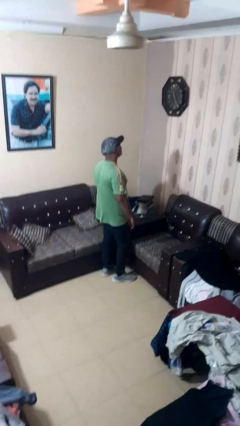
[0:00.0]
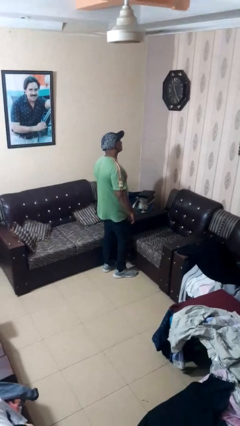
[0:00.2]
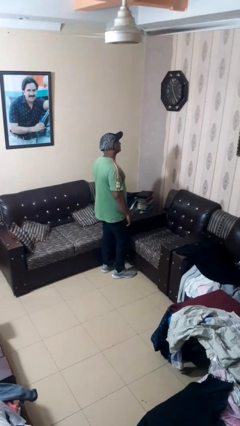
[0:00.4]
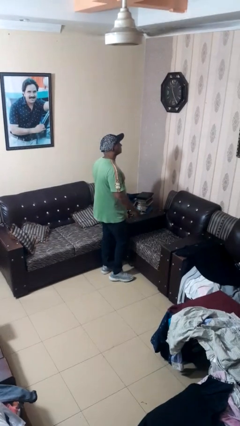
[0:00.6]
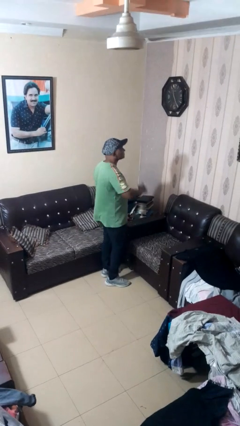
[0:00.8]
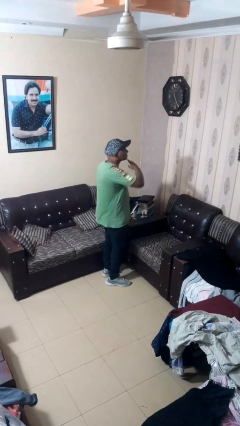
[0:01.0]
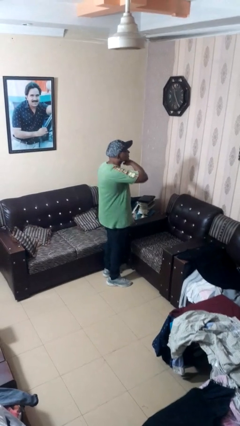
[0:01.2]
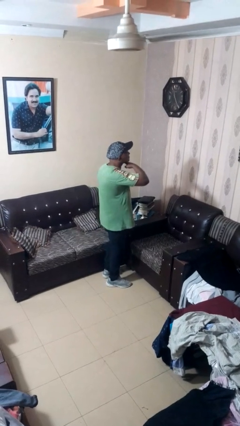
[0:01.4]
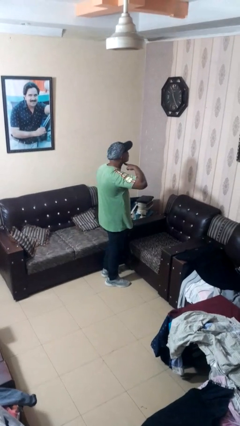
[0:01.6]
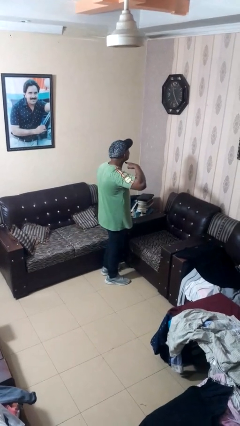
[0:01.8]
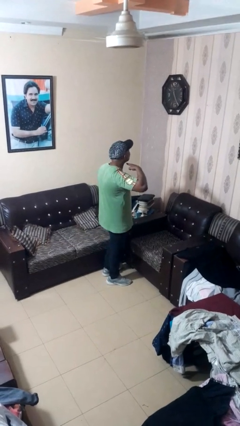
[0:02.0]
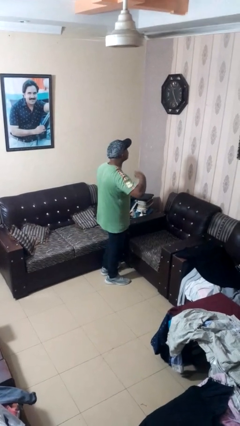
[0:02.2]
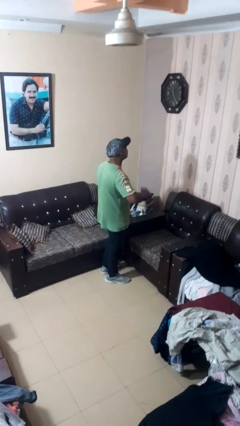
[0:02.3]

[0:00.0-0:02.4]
person gestures cut

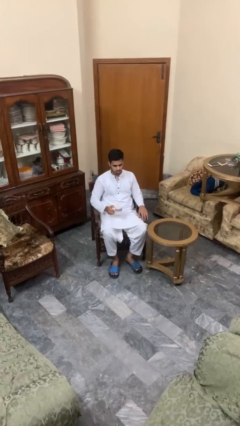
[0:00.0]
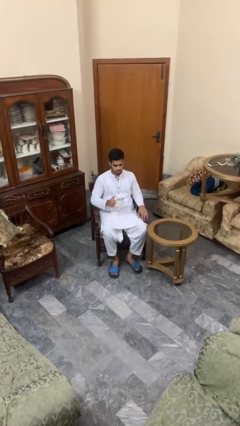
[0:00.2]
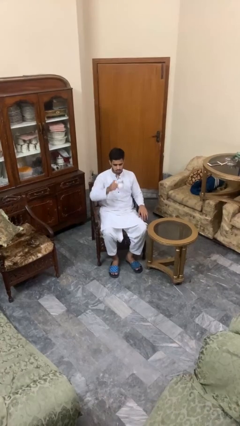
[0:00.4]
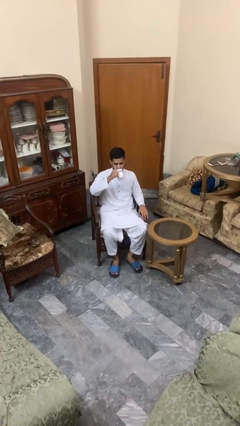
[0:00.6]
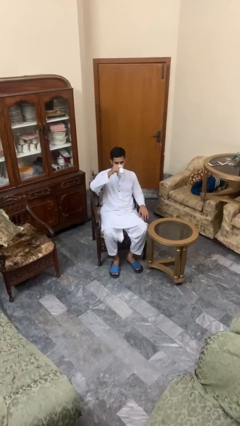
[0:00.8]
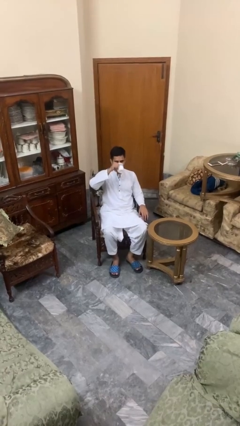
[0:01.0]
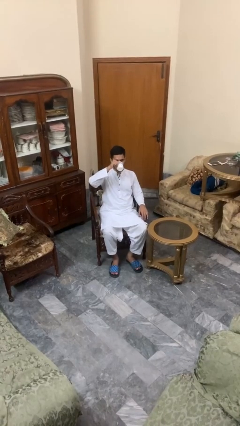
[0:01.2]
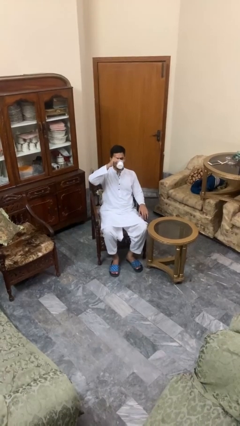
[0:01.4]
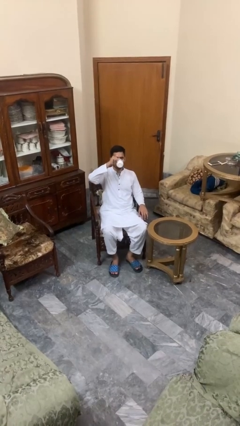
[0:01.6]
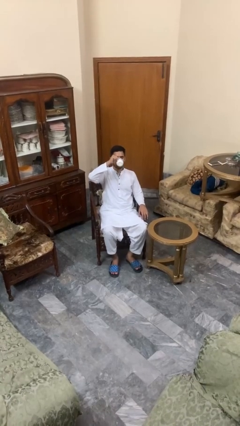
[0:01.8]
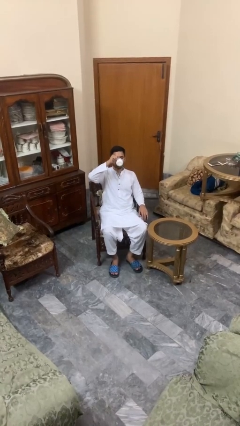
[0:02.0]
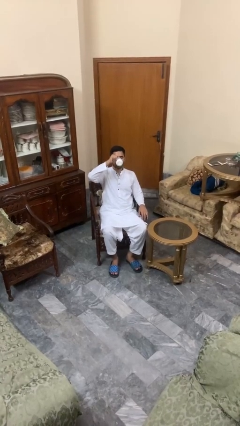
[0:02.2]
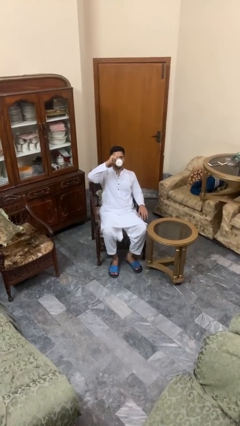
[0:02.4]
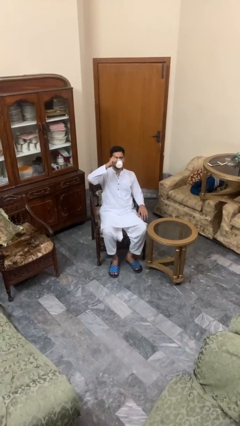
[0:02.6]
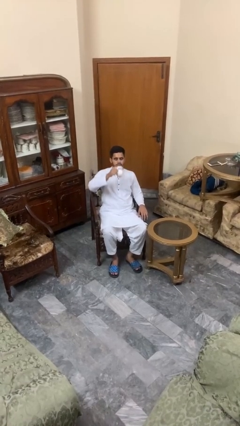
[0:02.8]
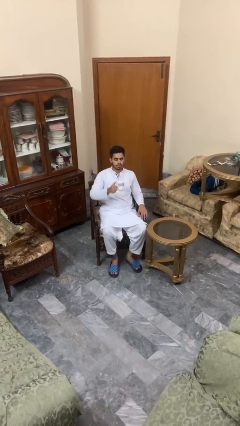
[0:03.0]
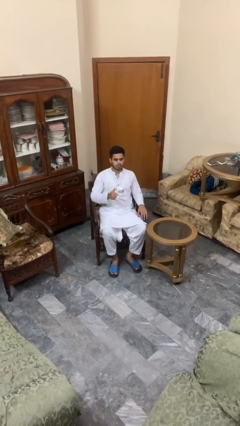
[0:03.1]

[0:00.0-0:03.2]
person drinks from mug

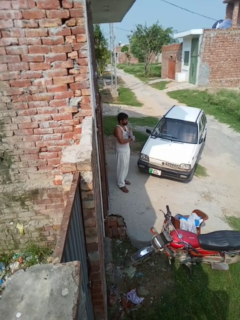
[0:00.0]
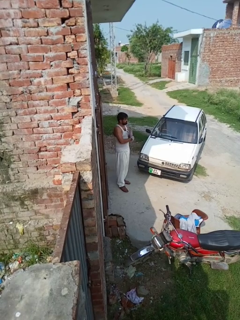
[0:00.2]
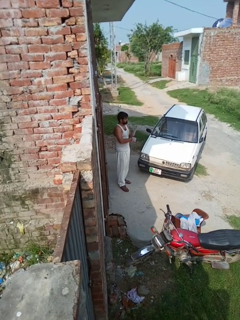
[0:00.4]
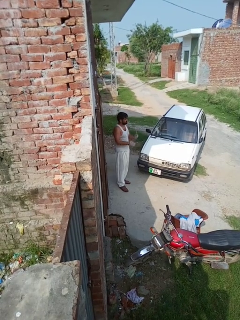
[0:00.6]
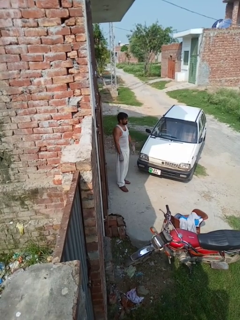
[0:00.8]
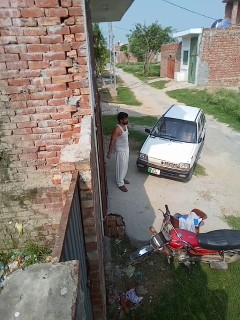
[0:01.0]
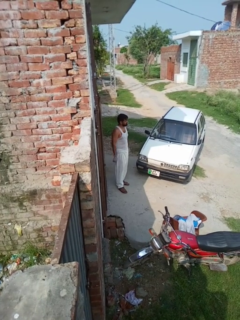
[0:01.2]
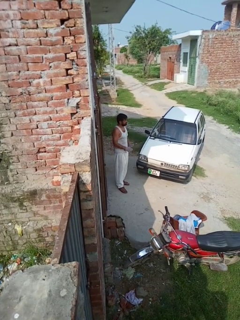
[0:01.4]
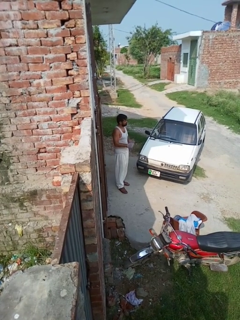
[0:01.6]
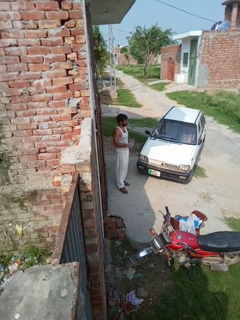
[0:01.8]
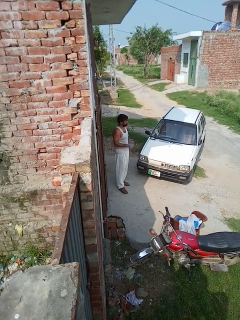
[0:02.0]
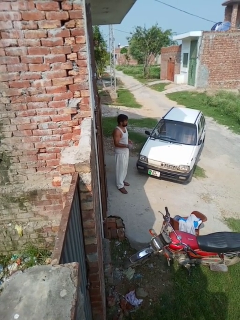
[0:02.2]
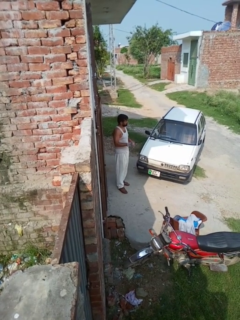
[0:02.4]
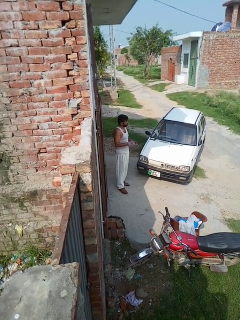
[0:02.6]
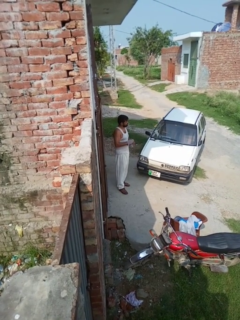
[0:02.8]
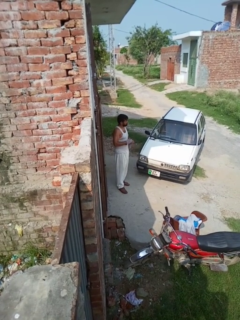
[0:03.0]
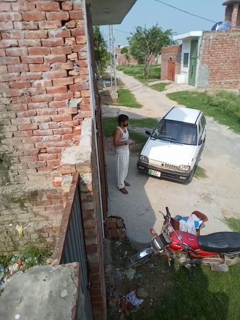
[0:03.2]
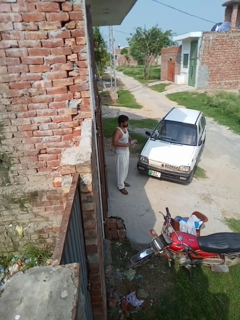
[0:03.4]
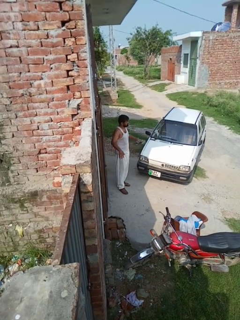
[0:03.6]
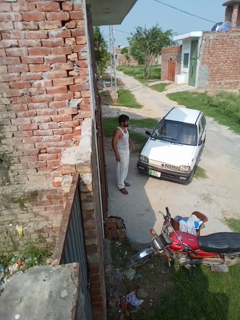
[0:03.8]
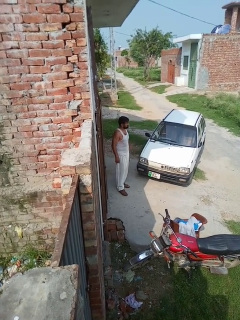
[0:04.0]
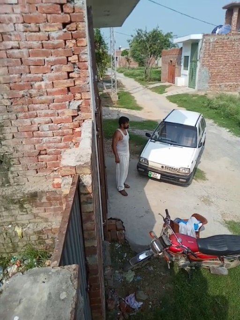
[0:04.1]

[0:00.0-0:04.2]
person takes off gloves

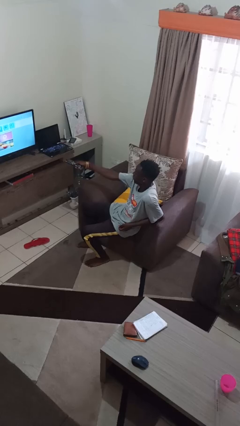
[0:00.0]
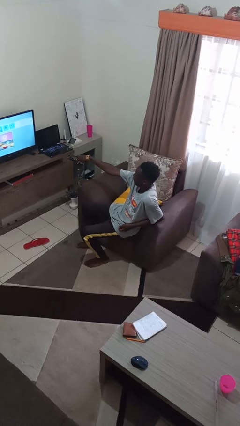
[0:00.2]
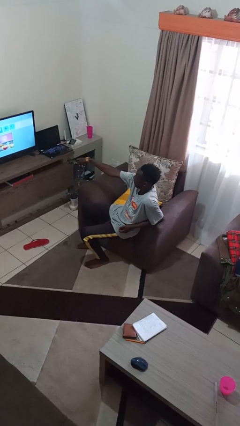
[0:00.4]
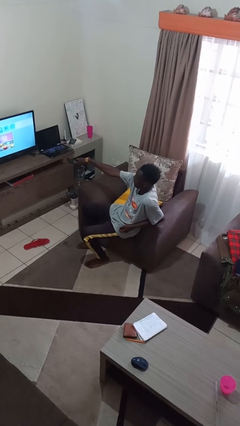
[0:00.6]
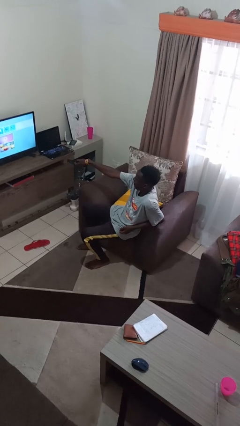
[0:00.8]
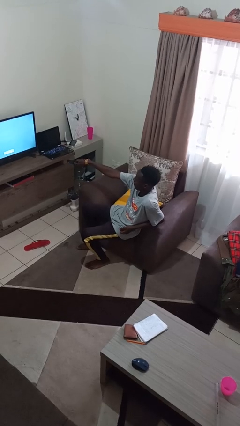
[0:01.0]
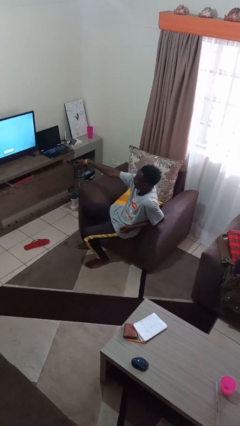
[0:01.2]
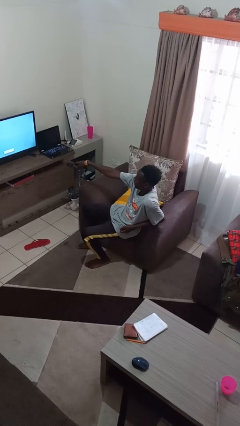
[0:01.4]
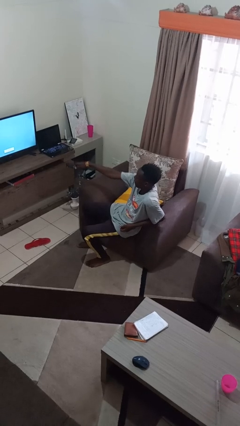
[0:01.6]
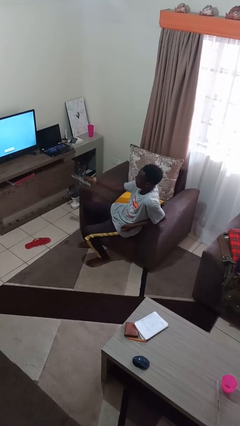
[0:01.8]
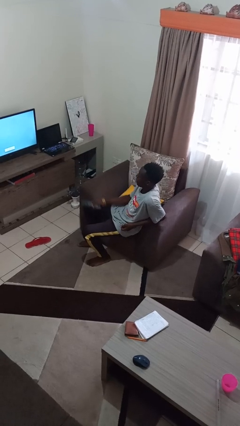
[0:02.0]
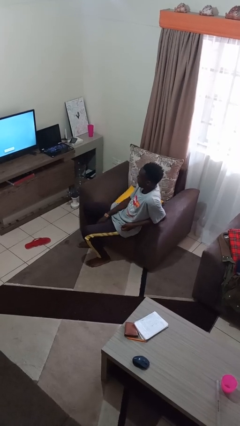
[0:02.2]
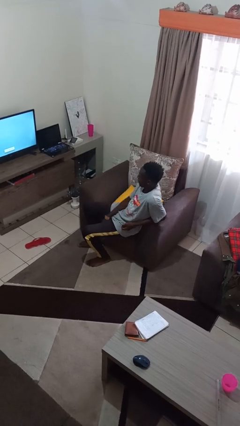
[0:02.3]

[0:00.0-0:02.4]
person uses television remote

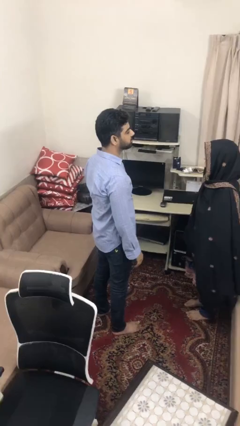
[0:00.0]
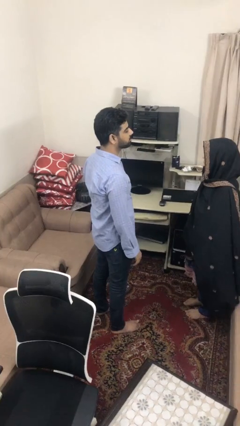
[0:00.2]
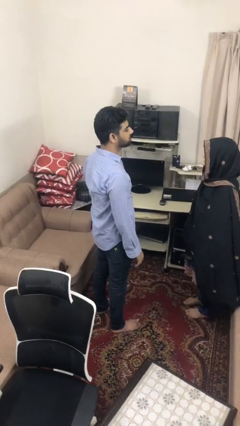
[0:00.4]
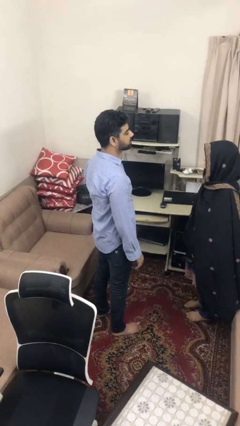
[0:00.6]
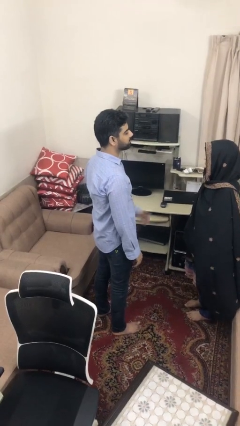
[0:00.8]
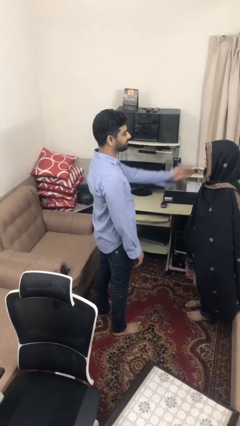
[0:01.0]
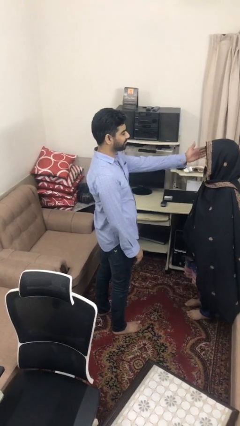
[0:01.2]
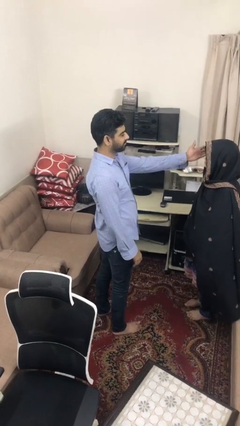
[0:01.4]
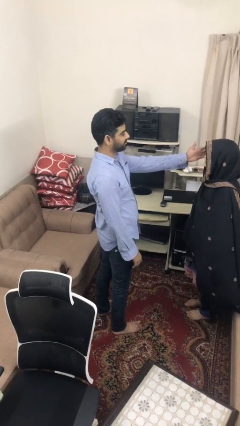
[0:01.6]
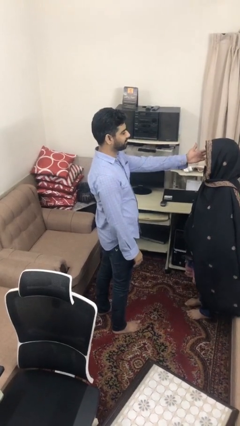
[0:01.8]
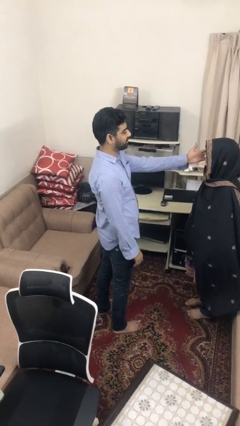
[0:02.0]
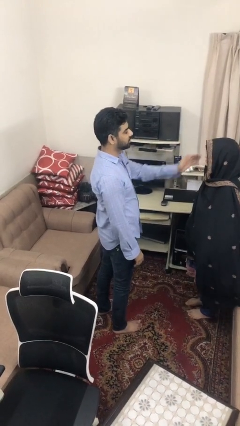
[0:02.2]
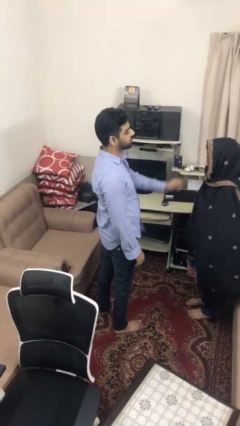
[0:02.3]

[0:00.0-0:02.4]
person touches face of person

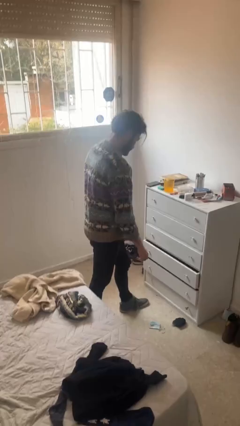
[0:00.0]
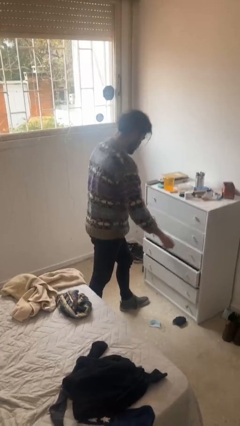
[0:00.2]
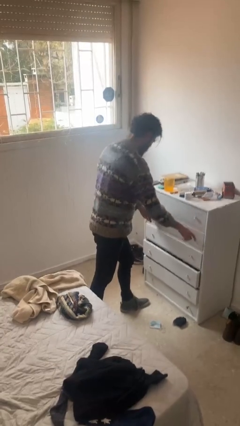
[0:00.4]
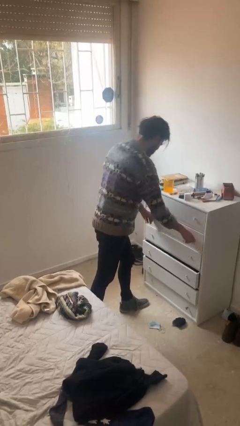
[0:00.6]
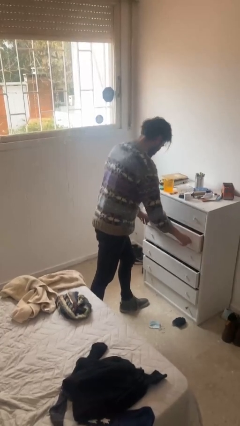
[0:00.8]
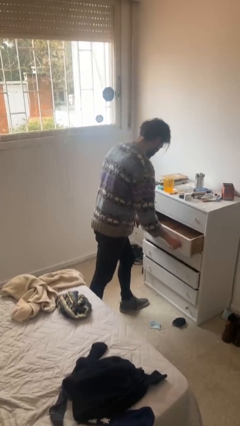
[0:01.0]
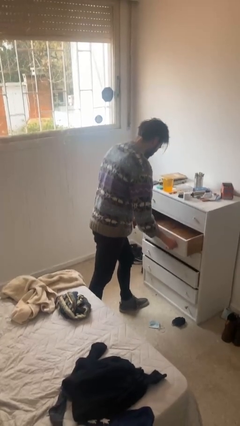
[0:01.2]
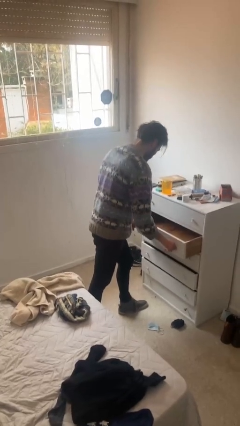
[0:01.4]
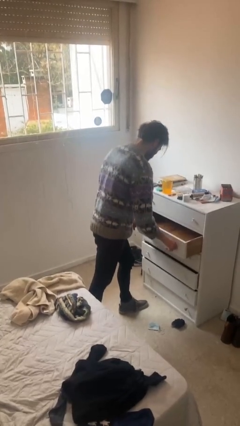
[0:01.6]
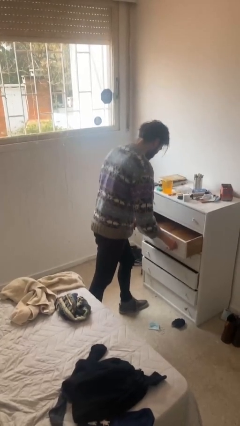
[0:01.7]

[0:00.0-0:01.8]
person opens dresser drawer

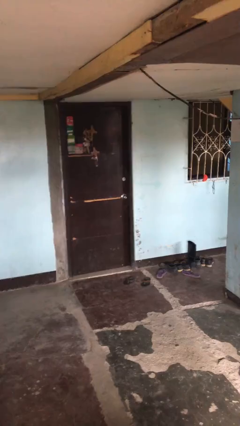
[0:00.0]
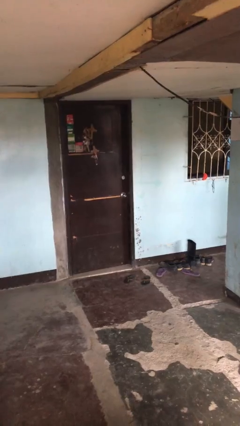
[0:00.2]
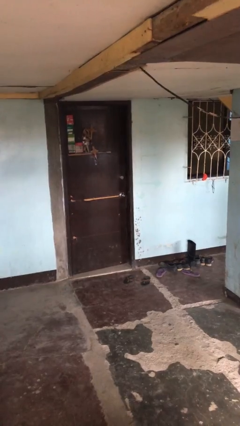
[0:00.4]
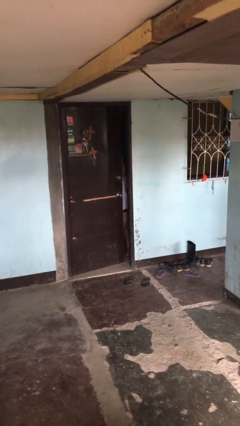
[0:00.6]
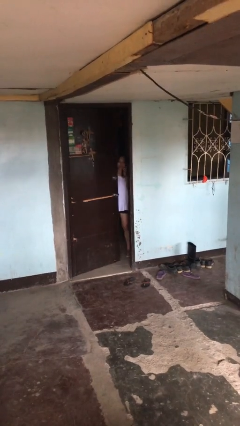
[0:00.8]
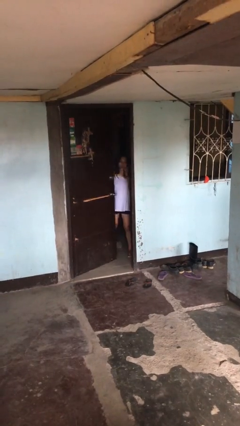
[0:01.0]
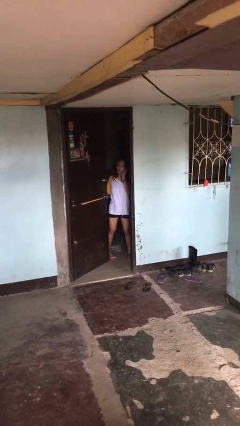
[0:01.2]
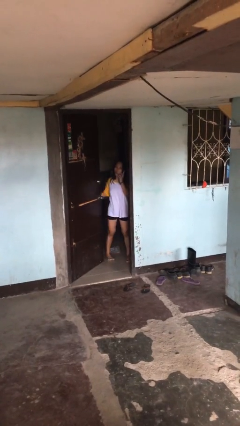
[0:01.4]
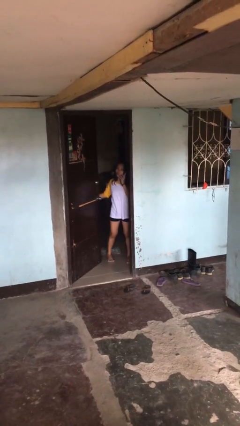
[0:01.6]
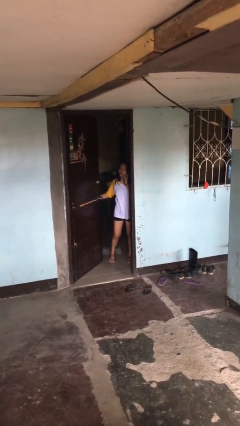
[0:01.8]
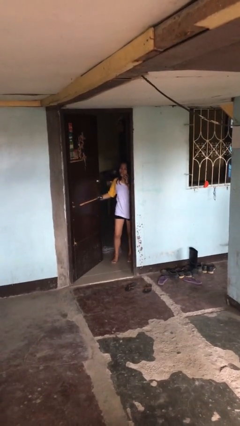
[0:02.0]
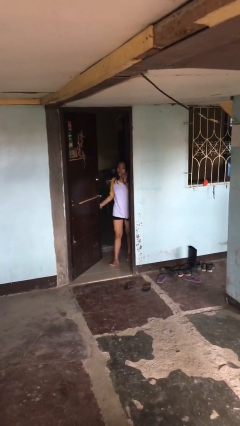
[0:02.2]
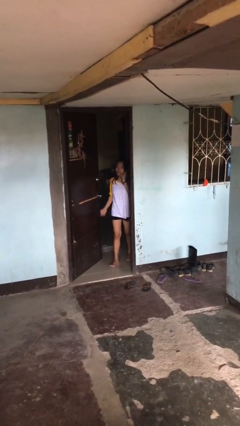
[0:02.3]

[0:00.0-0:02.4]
person opens facility door
